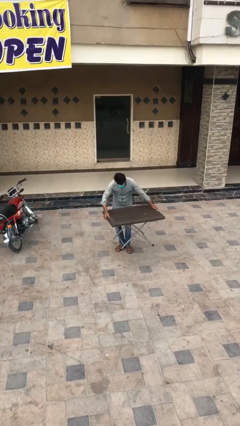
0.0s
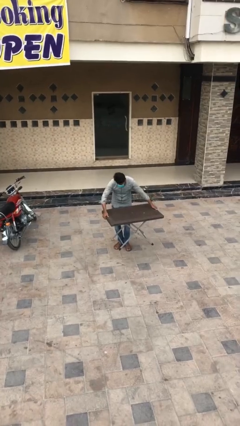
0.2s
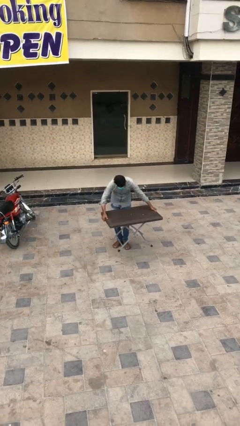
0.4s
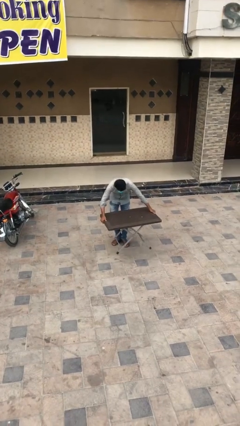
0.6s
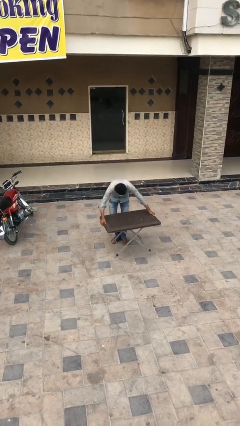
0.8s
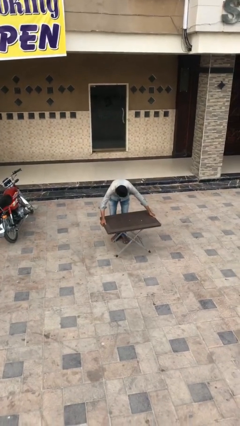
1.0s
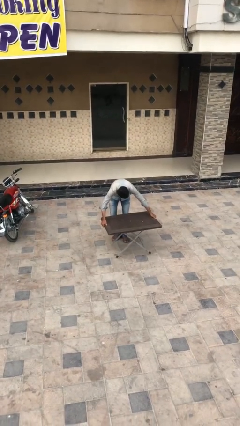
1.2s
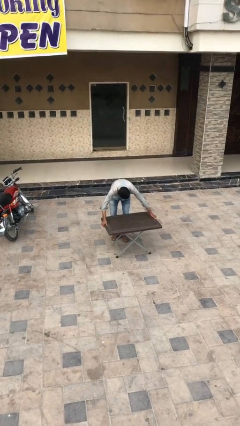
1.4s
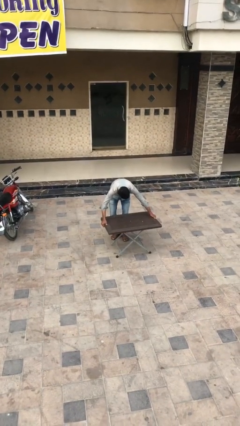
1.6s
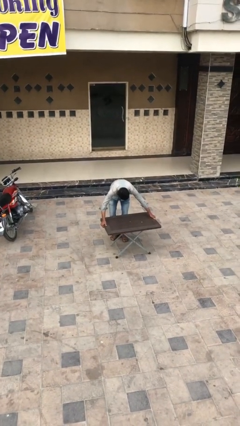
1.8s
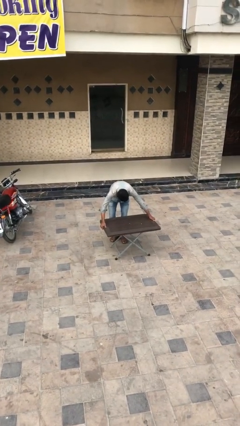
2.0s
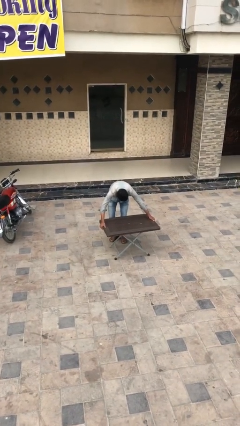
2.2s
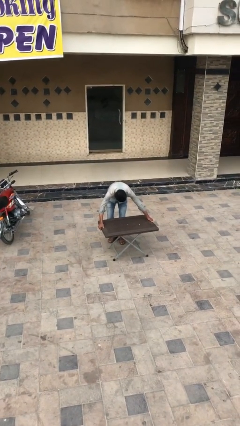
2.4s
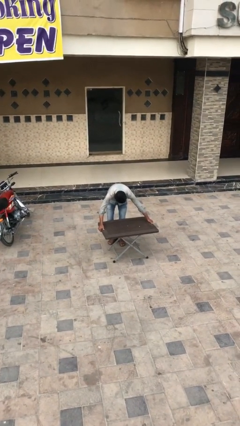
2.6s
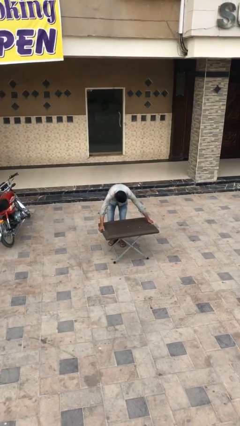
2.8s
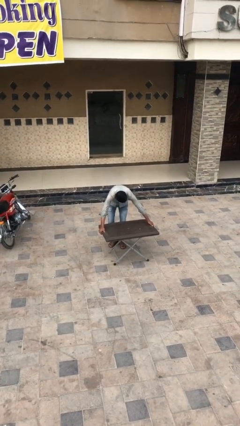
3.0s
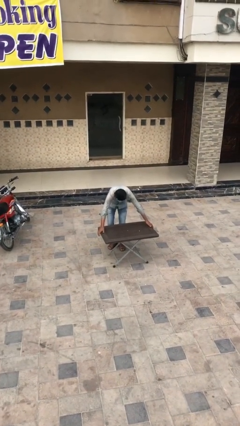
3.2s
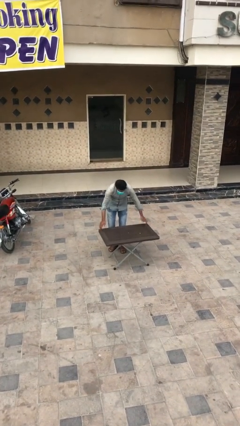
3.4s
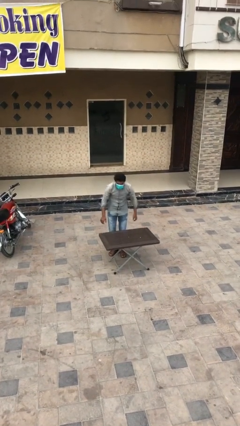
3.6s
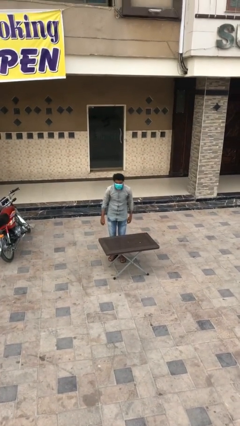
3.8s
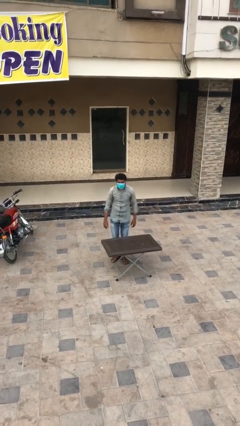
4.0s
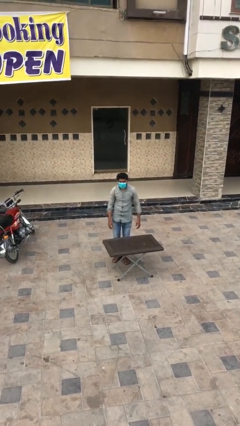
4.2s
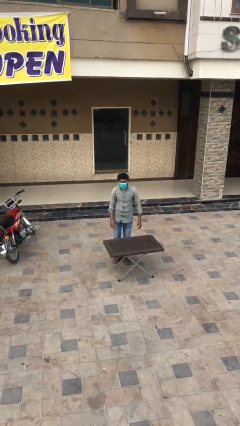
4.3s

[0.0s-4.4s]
person puts down object on floor

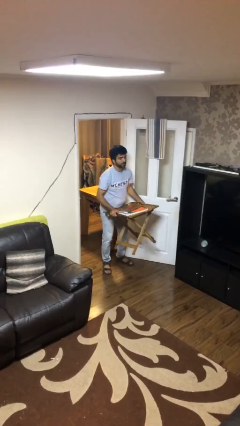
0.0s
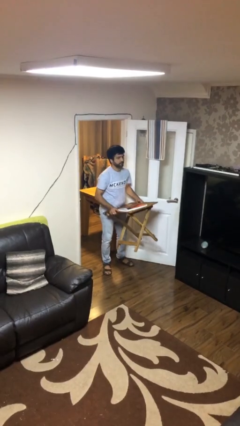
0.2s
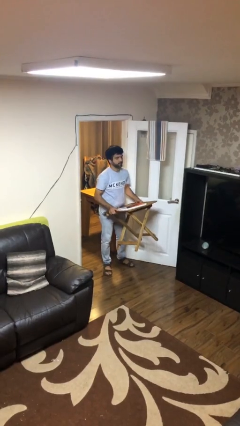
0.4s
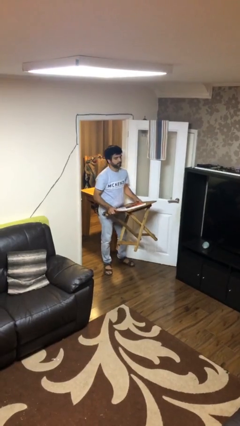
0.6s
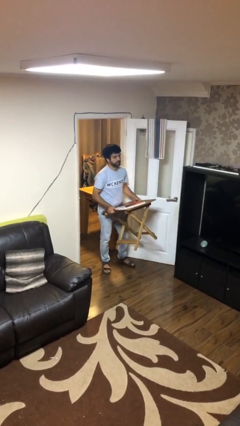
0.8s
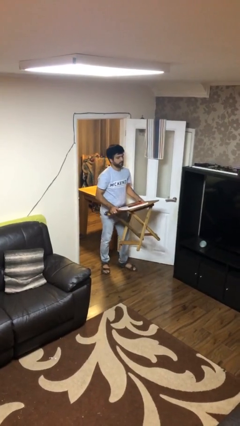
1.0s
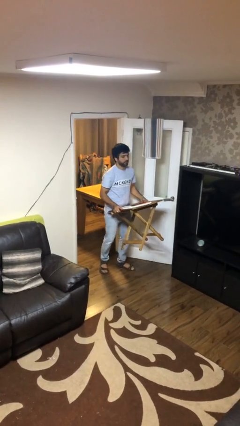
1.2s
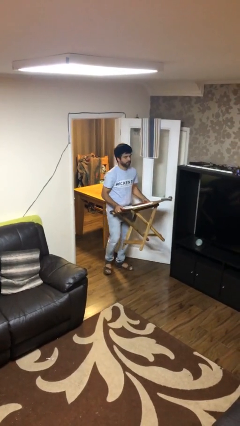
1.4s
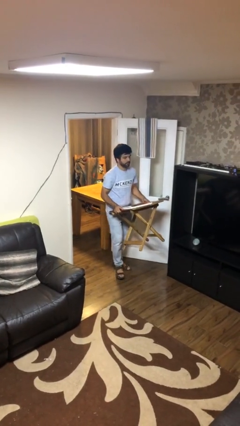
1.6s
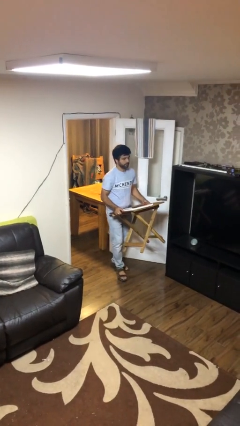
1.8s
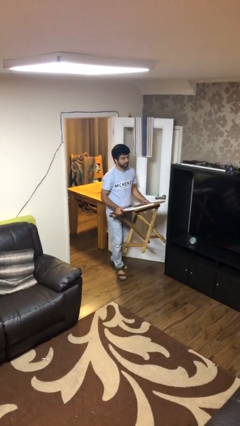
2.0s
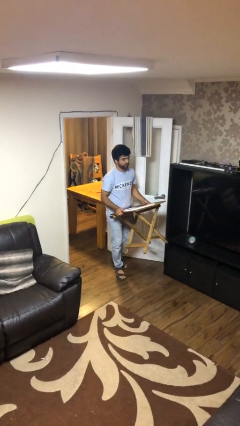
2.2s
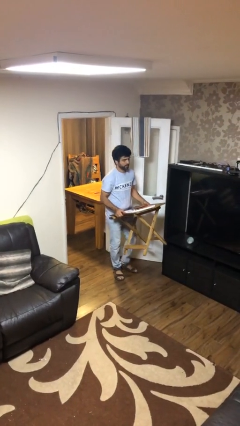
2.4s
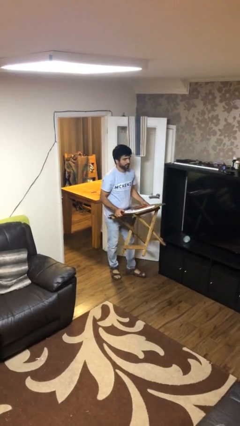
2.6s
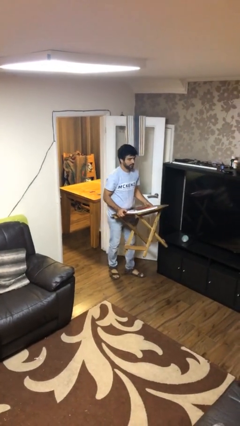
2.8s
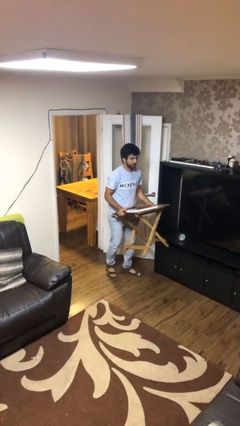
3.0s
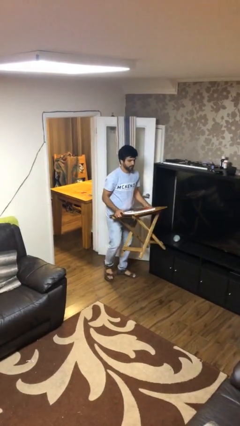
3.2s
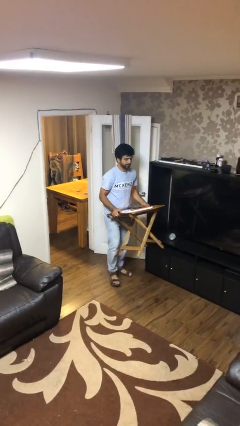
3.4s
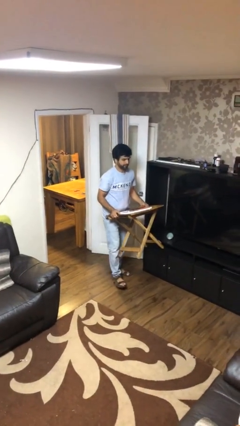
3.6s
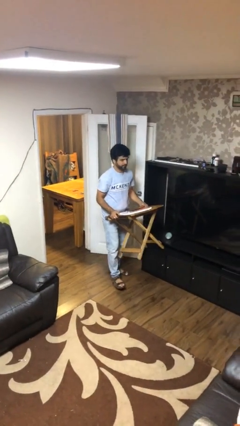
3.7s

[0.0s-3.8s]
person carries heavy object

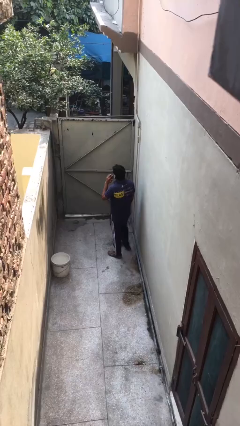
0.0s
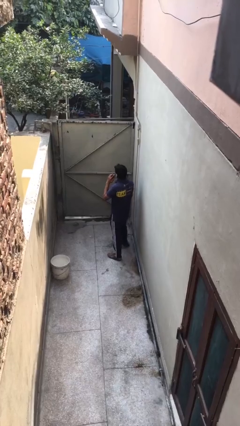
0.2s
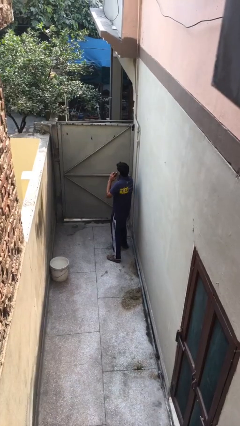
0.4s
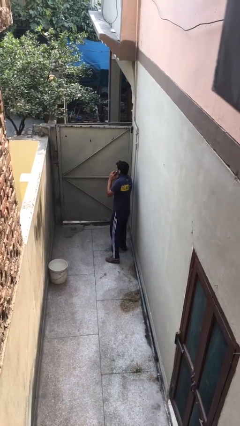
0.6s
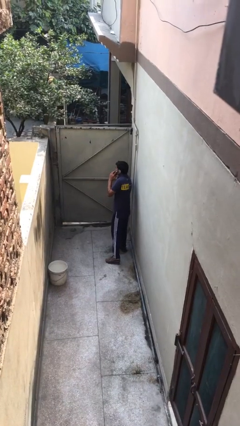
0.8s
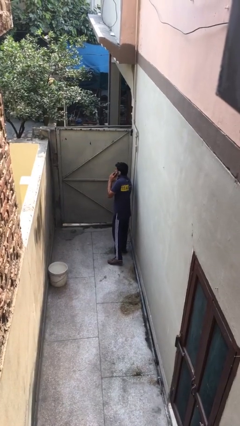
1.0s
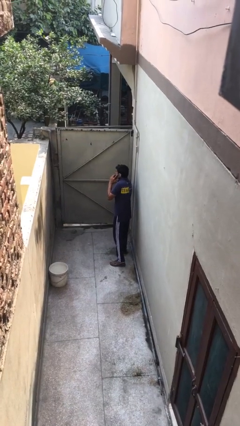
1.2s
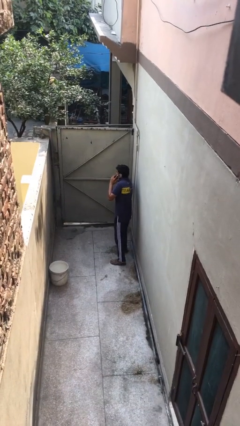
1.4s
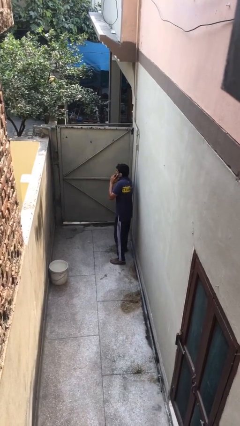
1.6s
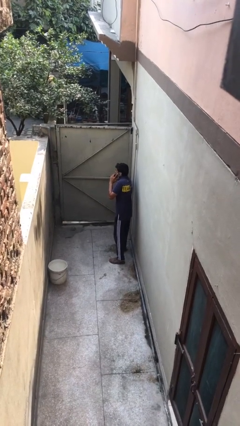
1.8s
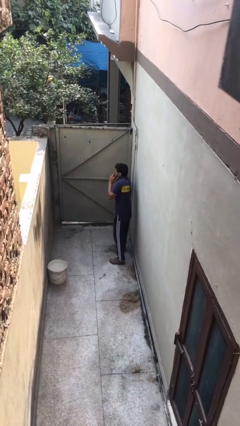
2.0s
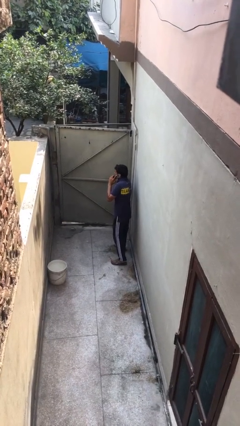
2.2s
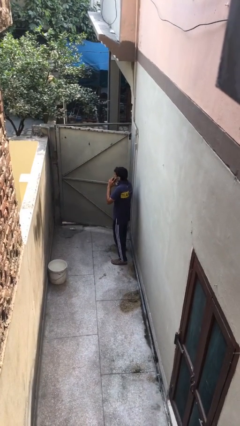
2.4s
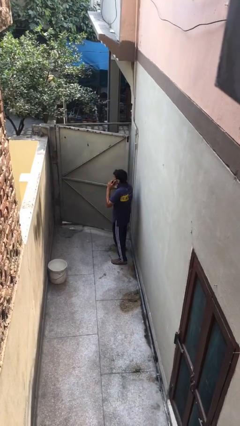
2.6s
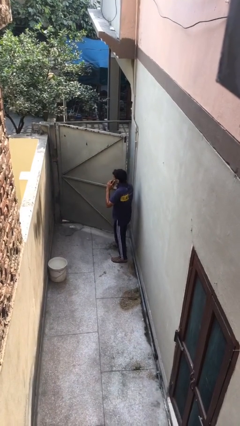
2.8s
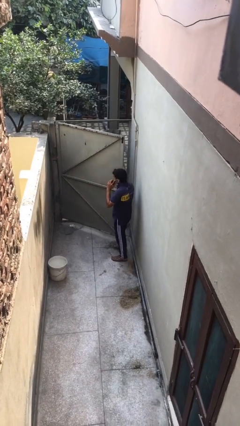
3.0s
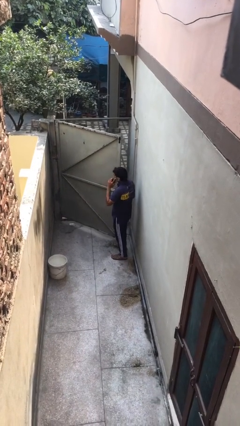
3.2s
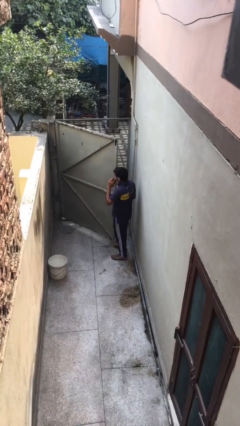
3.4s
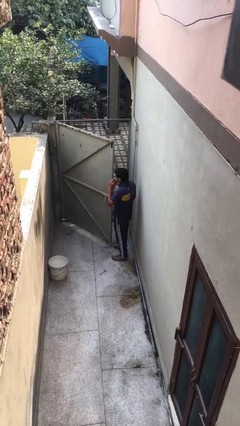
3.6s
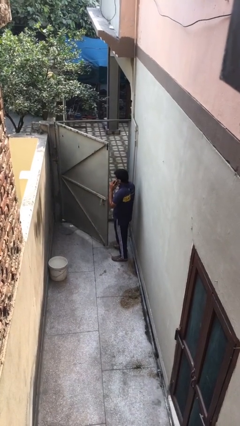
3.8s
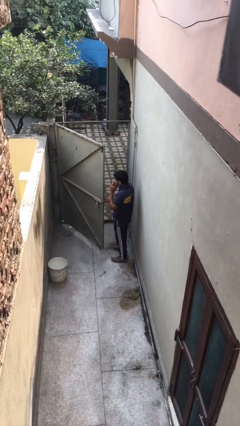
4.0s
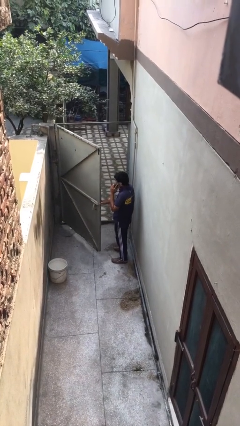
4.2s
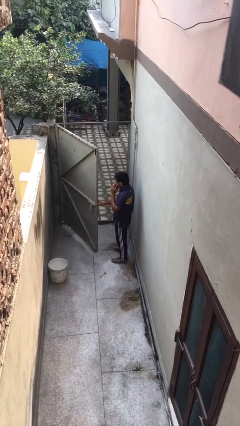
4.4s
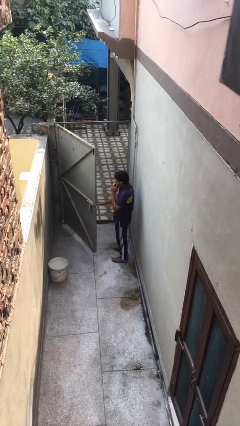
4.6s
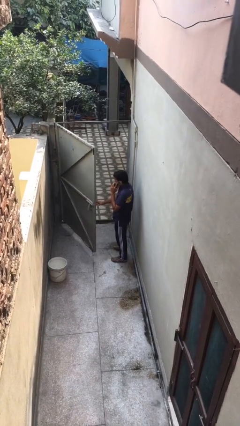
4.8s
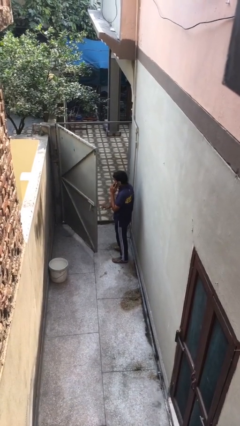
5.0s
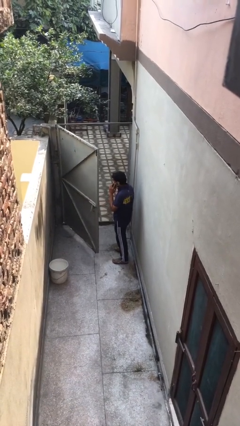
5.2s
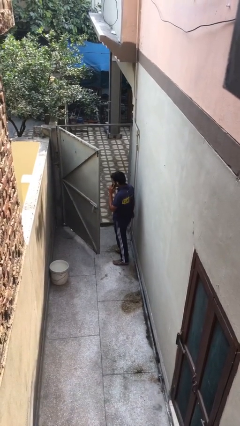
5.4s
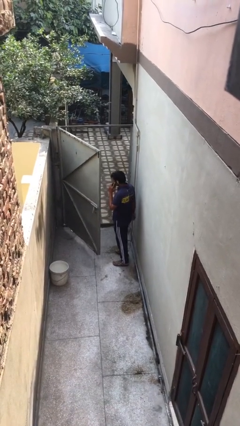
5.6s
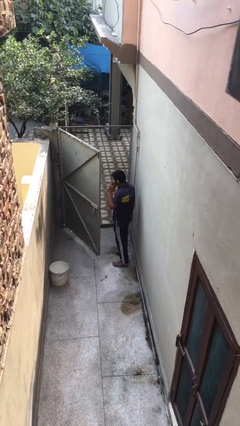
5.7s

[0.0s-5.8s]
person opens facility door

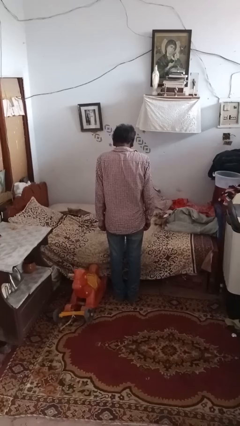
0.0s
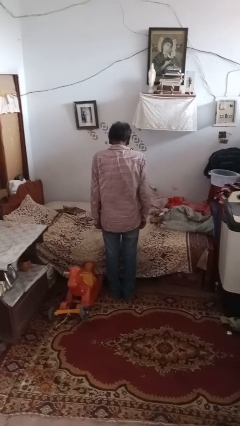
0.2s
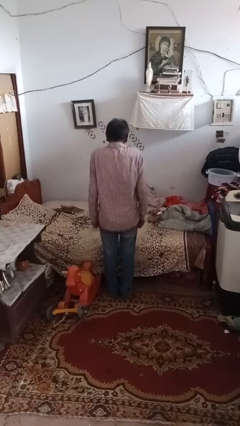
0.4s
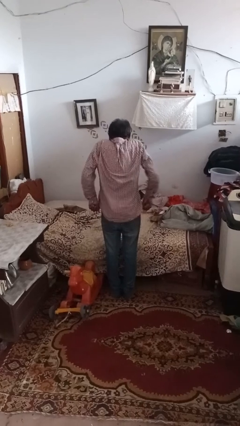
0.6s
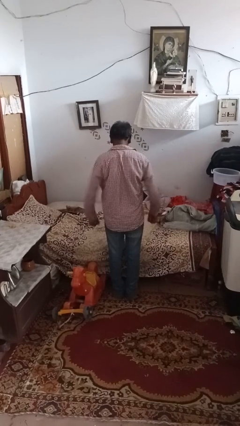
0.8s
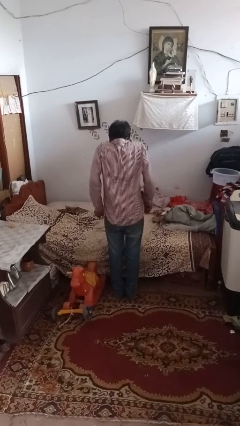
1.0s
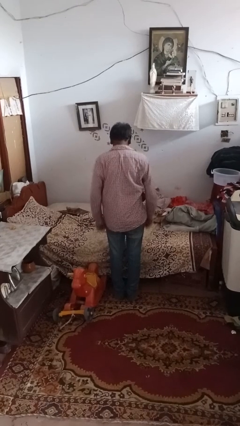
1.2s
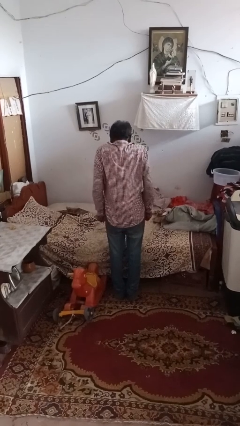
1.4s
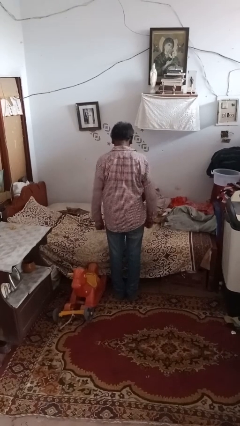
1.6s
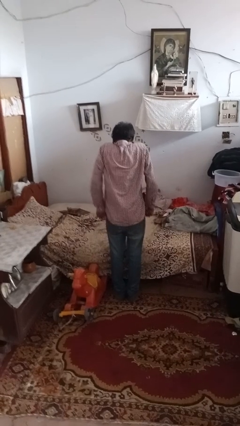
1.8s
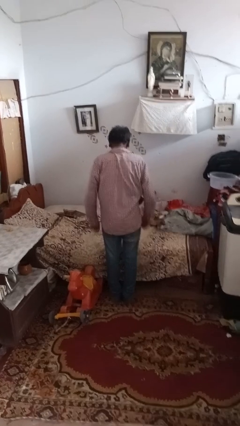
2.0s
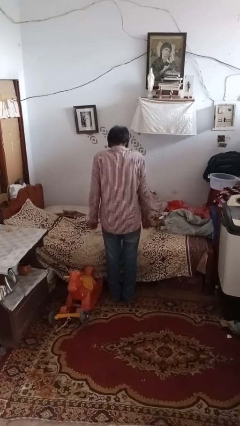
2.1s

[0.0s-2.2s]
person shrugs

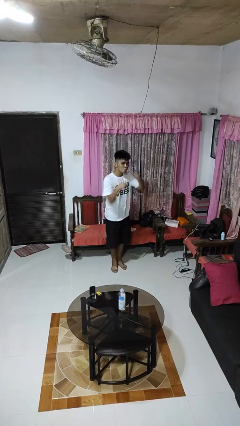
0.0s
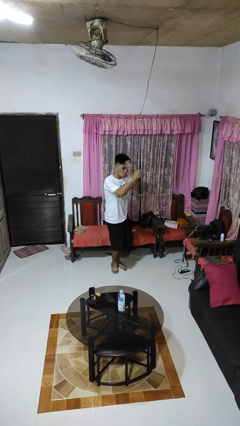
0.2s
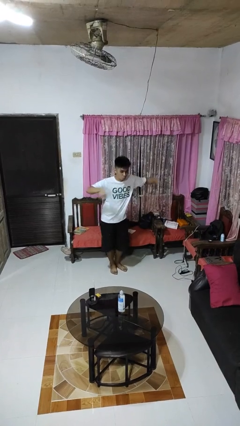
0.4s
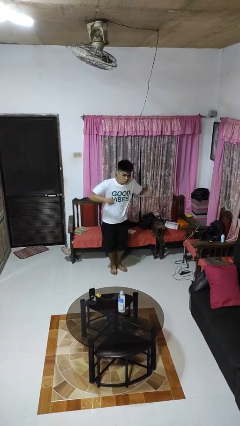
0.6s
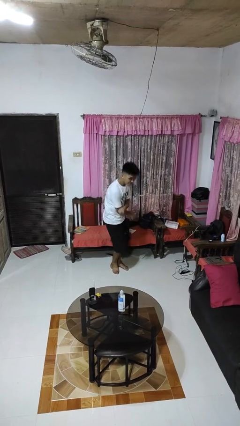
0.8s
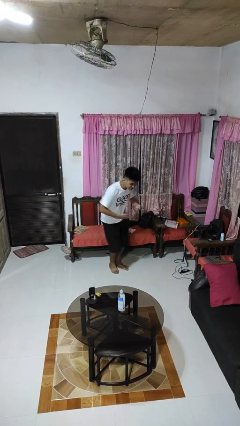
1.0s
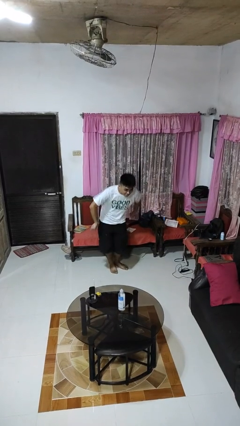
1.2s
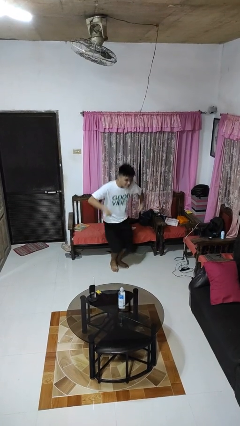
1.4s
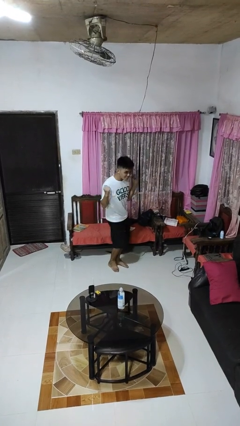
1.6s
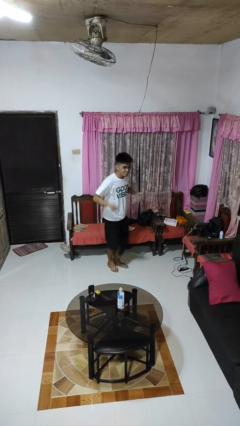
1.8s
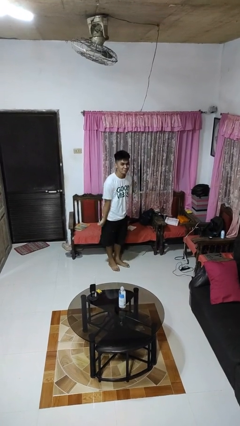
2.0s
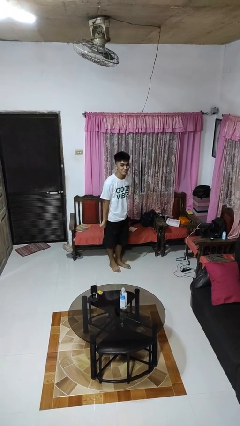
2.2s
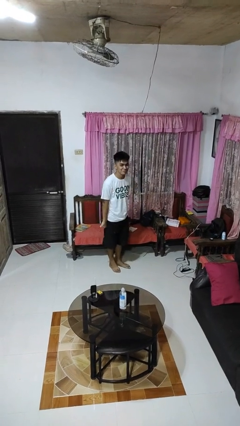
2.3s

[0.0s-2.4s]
person dances in place
